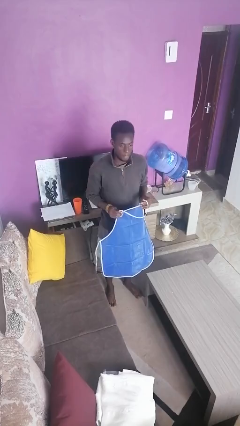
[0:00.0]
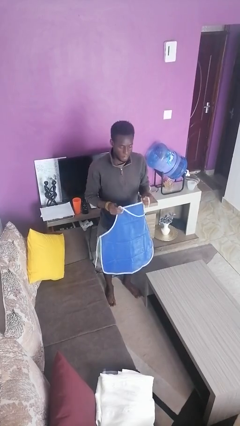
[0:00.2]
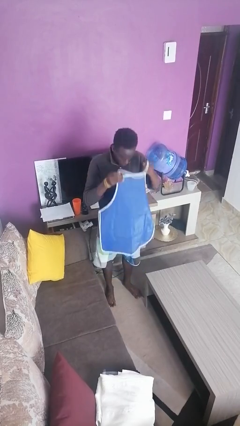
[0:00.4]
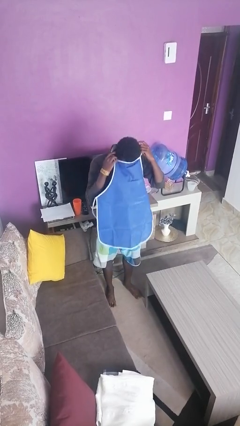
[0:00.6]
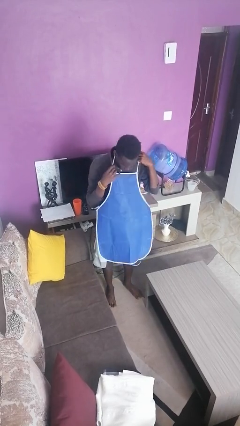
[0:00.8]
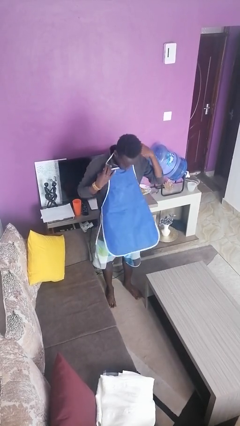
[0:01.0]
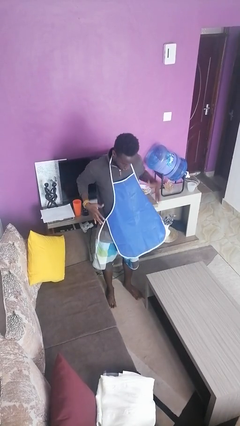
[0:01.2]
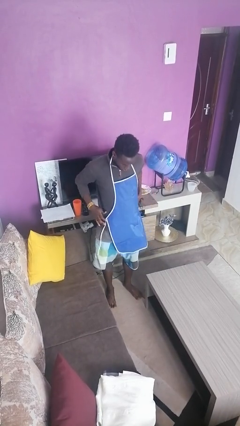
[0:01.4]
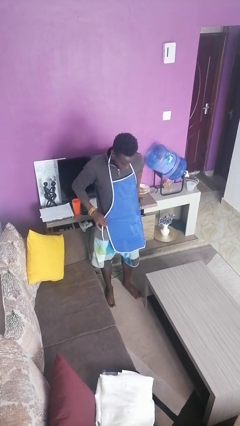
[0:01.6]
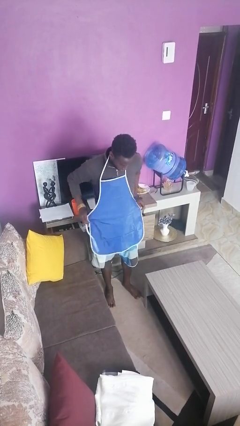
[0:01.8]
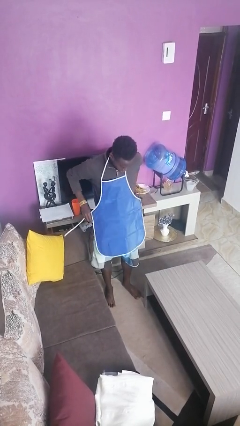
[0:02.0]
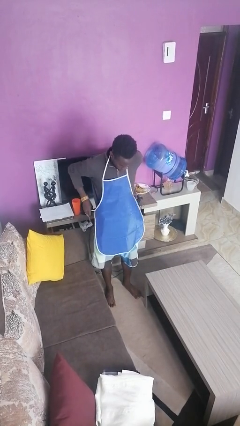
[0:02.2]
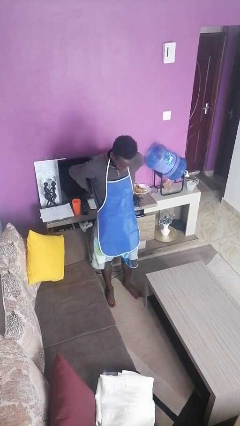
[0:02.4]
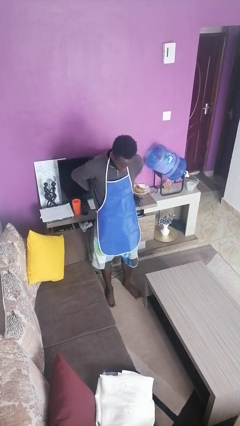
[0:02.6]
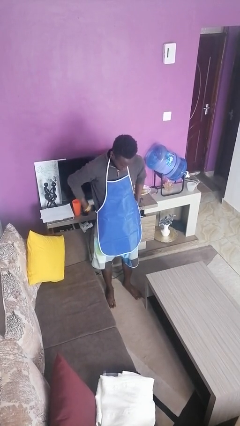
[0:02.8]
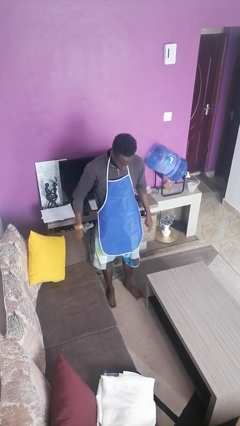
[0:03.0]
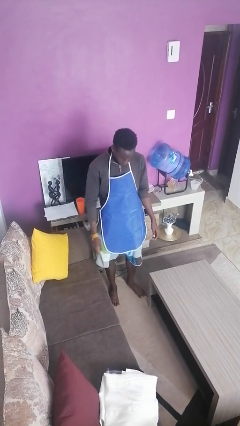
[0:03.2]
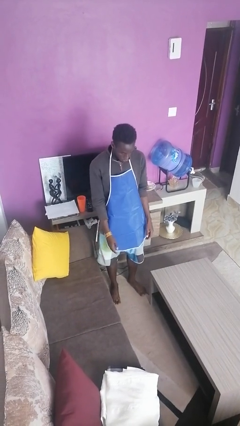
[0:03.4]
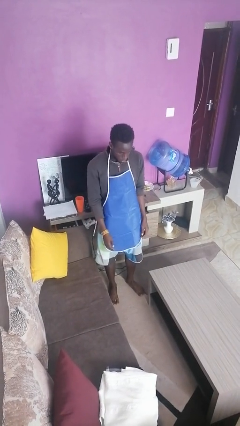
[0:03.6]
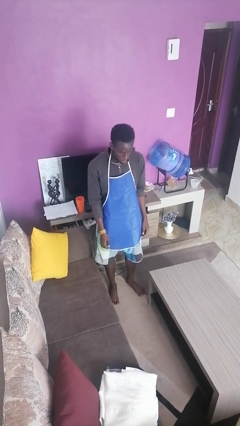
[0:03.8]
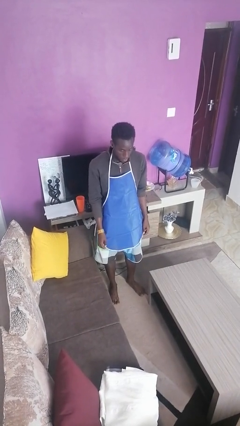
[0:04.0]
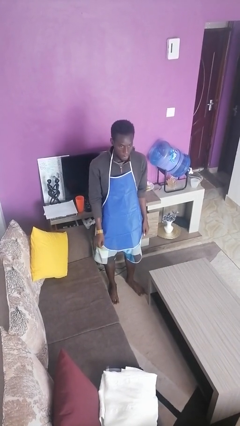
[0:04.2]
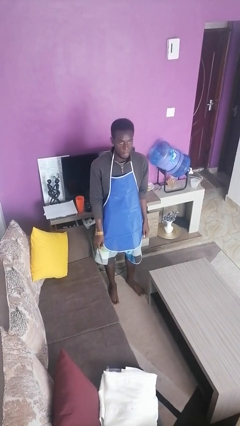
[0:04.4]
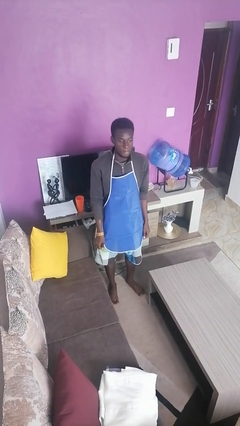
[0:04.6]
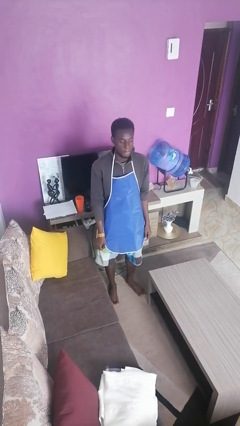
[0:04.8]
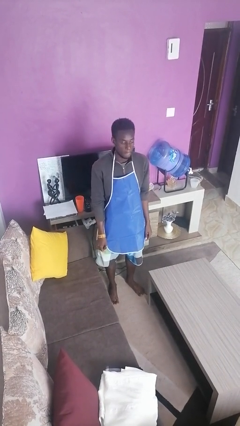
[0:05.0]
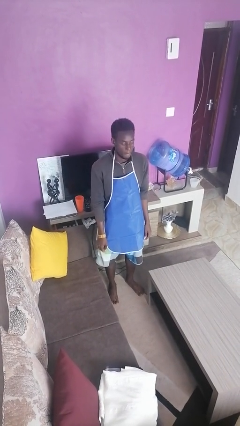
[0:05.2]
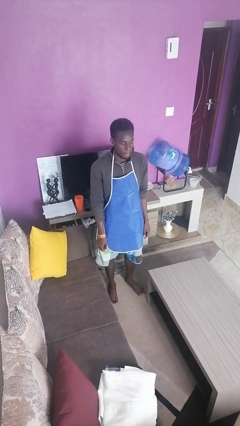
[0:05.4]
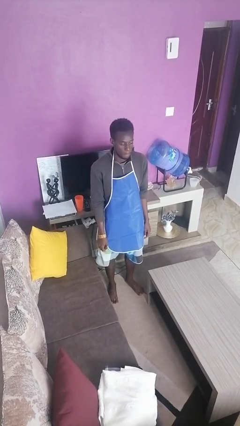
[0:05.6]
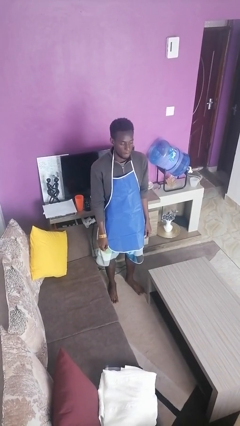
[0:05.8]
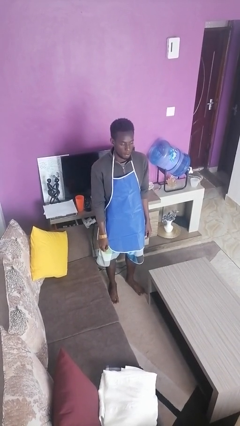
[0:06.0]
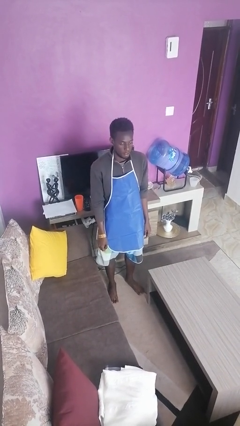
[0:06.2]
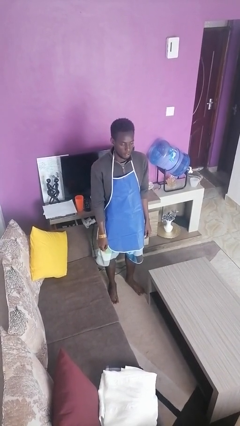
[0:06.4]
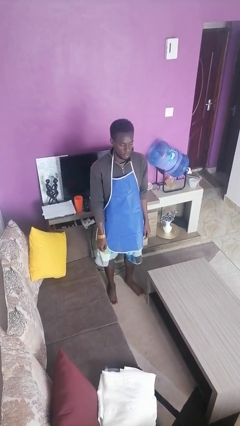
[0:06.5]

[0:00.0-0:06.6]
person puts on apron

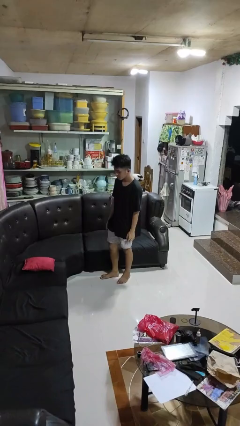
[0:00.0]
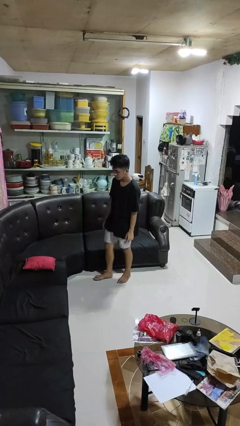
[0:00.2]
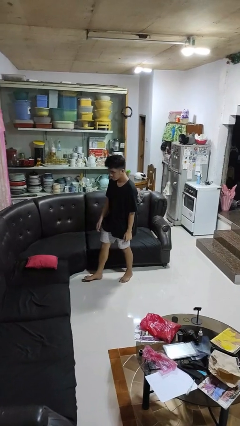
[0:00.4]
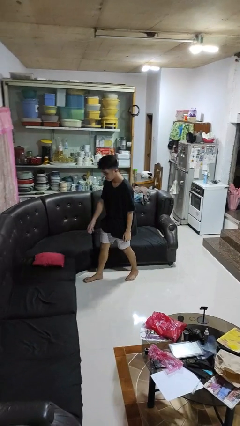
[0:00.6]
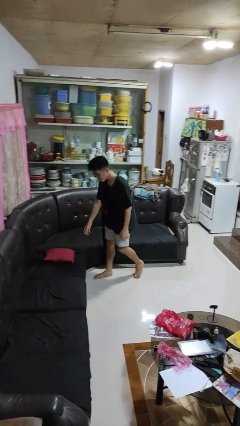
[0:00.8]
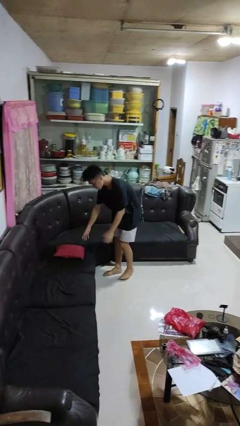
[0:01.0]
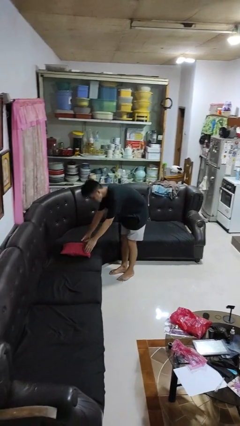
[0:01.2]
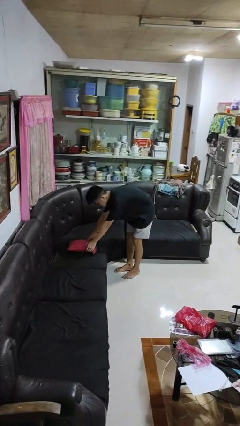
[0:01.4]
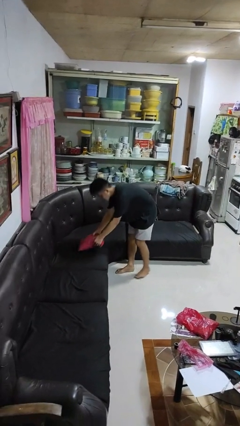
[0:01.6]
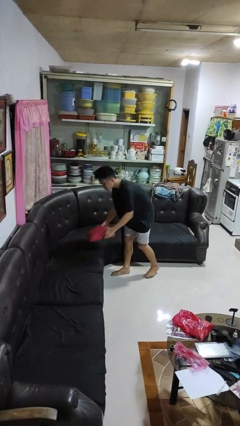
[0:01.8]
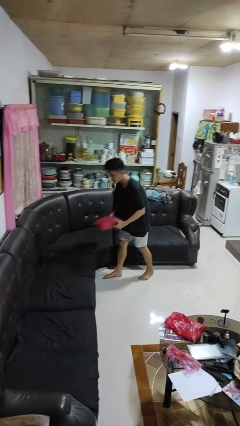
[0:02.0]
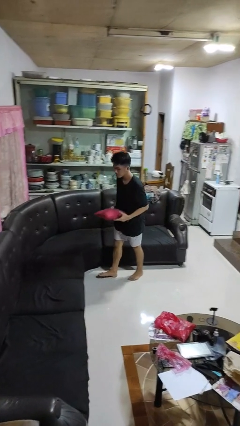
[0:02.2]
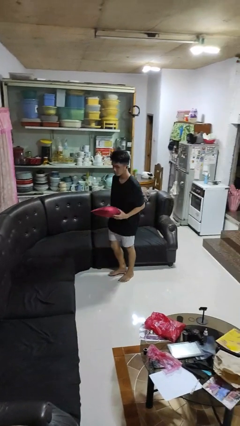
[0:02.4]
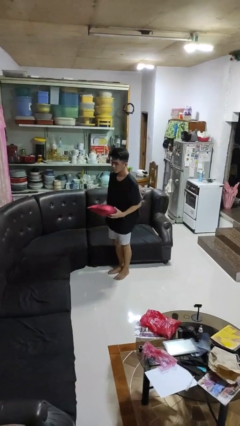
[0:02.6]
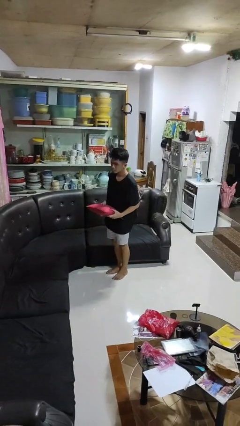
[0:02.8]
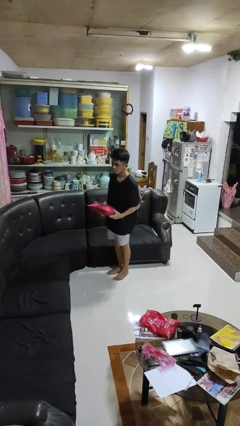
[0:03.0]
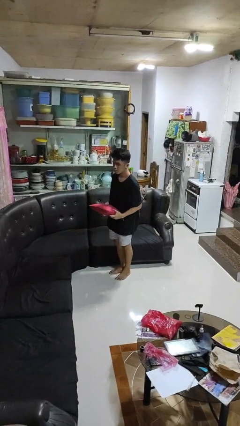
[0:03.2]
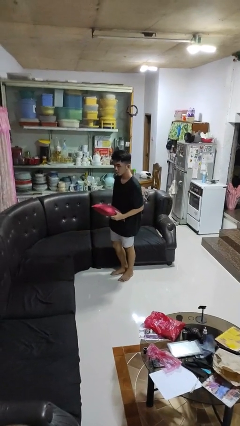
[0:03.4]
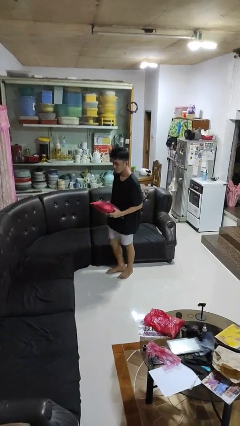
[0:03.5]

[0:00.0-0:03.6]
person picks up object from couch

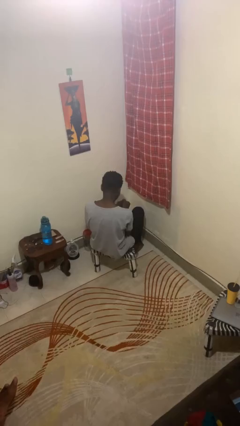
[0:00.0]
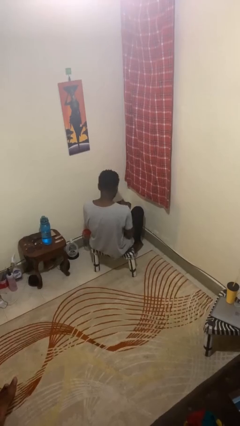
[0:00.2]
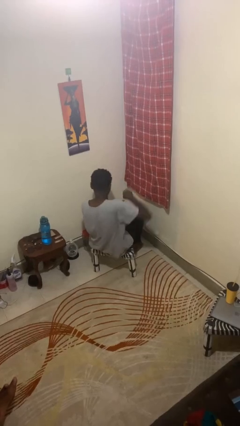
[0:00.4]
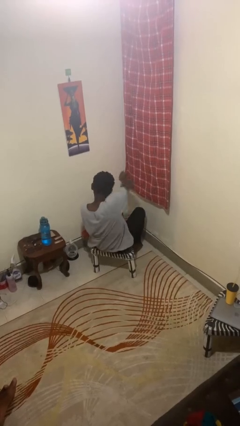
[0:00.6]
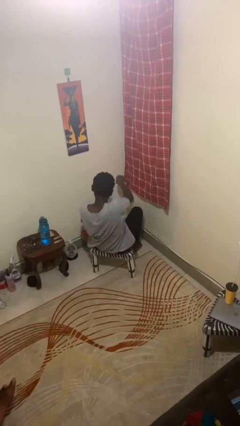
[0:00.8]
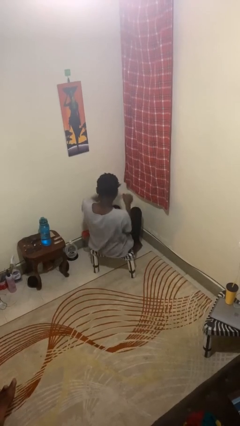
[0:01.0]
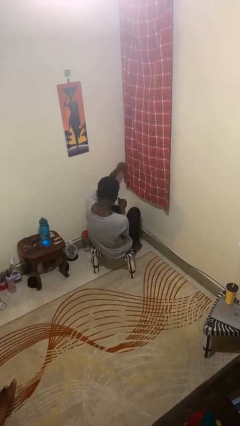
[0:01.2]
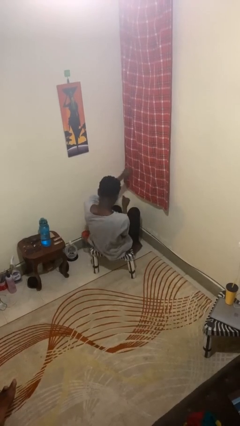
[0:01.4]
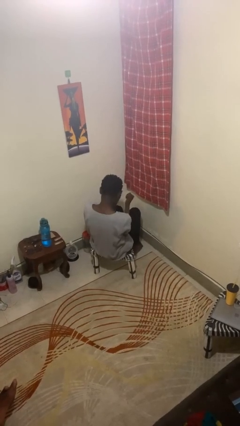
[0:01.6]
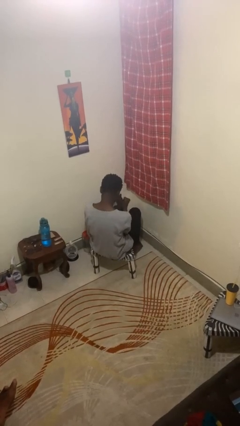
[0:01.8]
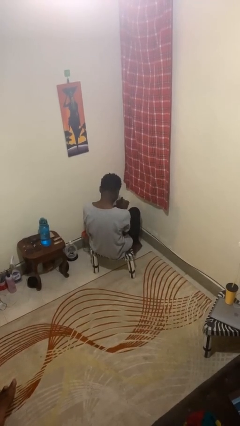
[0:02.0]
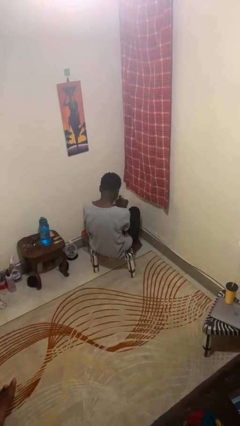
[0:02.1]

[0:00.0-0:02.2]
person punches

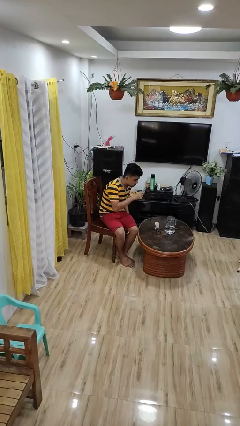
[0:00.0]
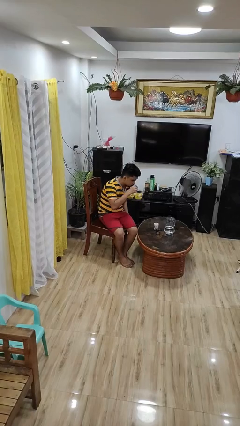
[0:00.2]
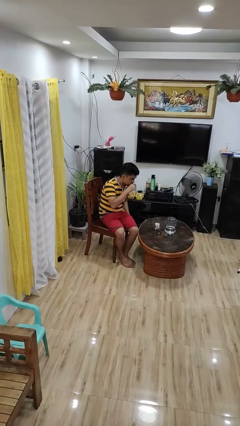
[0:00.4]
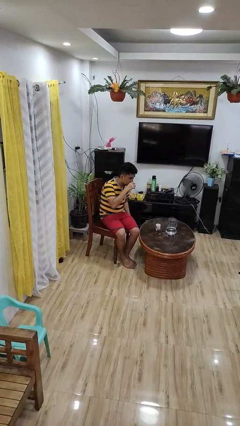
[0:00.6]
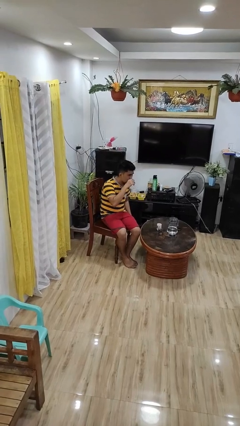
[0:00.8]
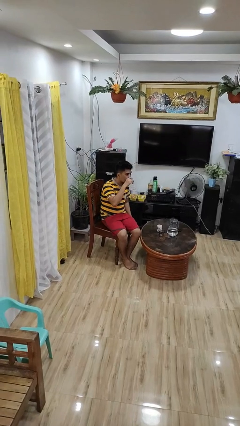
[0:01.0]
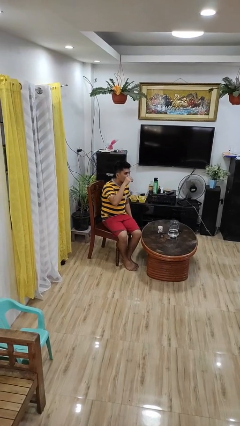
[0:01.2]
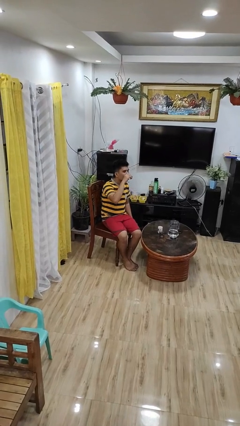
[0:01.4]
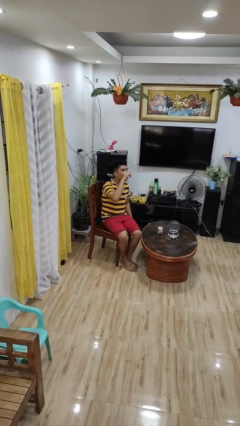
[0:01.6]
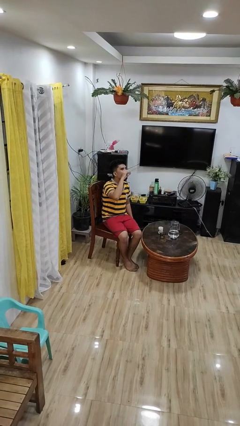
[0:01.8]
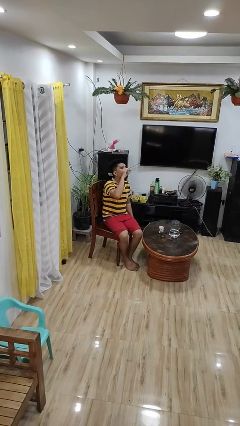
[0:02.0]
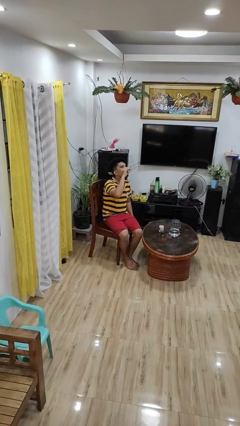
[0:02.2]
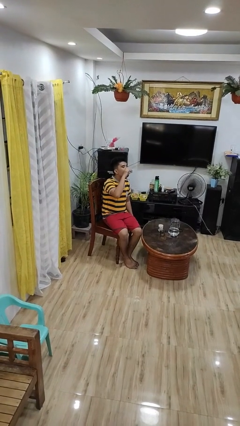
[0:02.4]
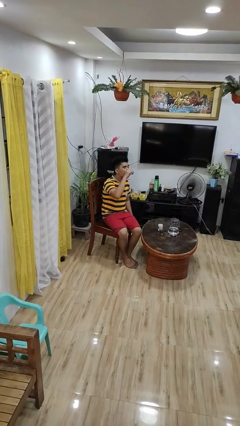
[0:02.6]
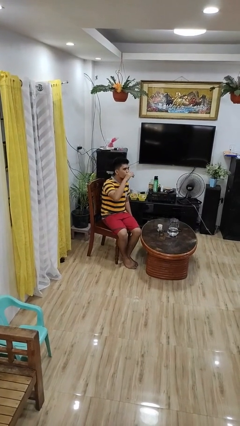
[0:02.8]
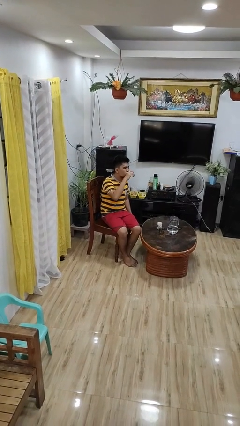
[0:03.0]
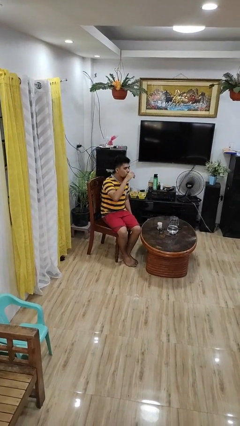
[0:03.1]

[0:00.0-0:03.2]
person drinks from shotglass

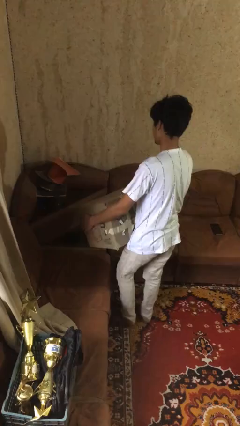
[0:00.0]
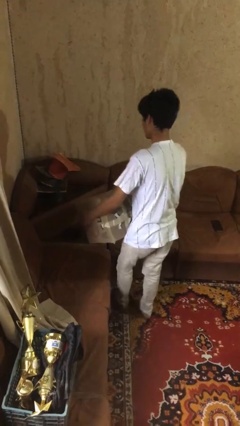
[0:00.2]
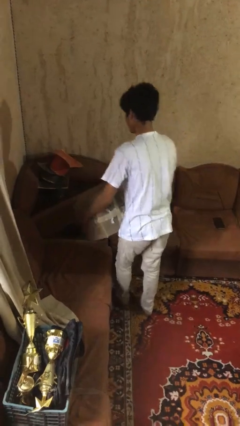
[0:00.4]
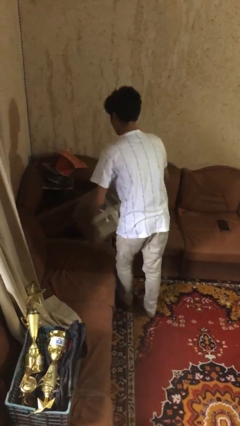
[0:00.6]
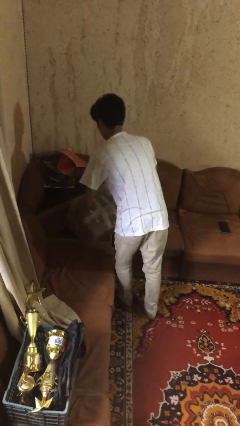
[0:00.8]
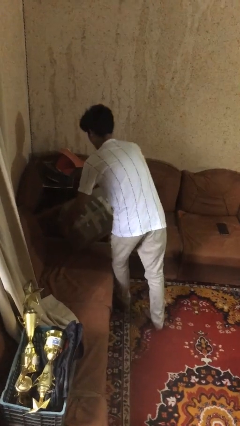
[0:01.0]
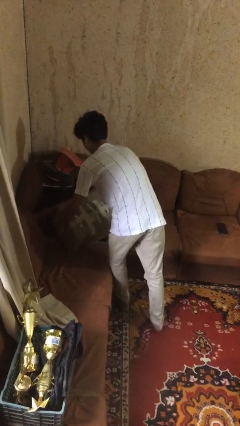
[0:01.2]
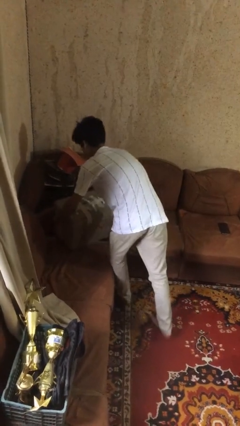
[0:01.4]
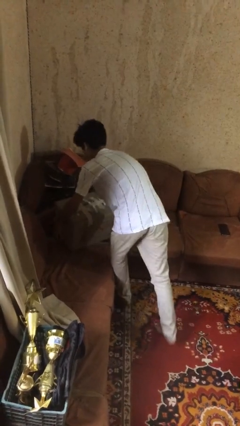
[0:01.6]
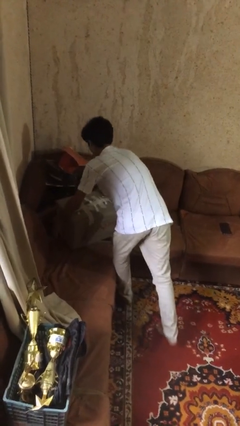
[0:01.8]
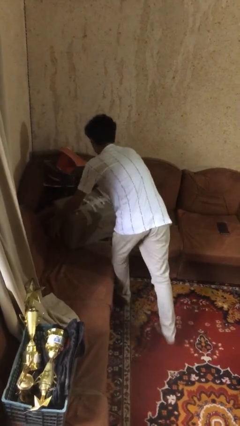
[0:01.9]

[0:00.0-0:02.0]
person puts down object on table
